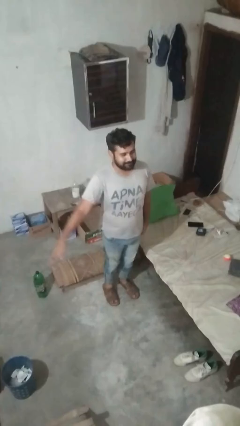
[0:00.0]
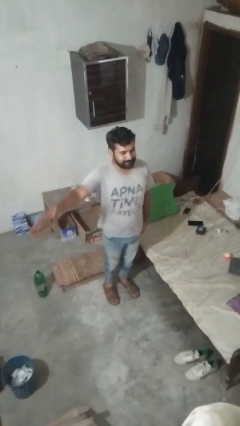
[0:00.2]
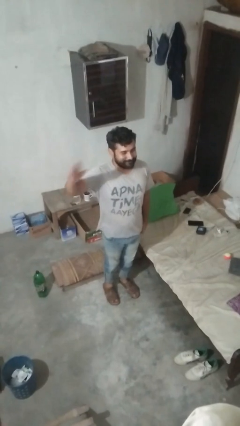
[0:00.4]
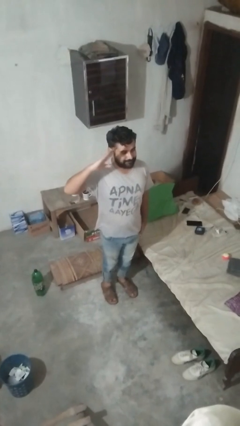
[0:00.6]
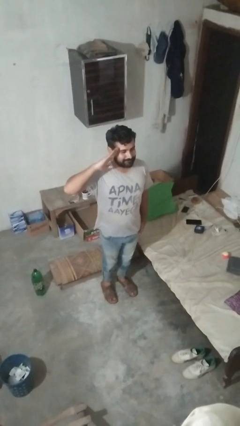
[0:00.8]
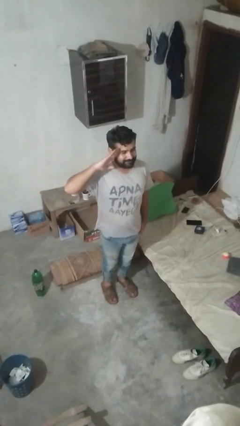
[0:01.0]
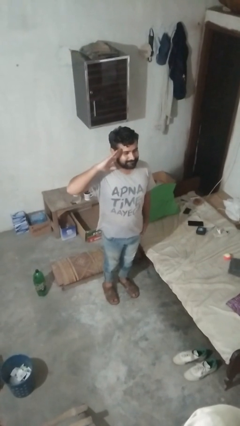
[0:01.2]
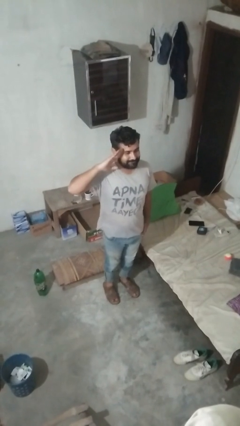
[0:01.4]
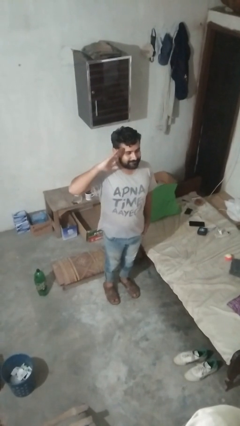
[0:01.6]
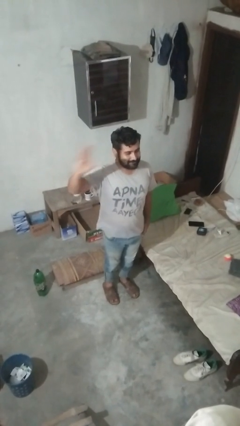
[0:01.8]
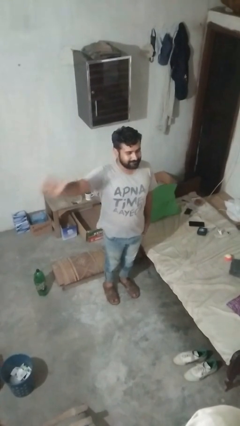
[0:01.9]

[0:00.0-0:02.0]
person salutes

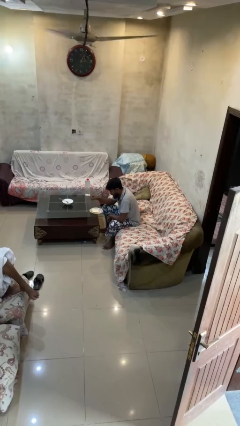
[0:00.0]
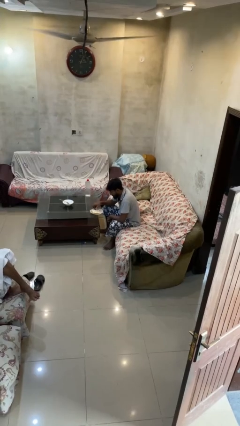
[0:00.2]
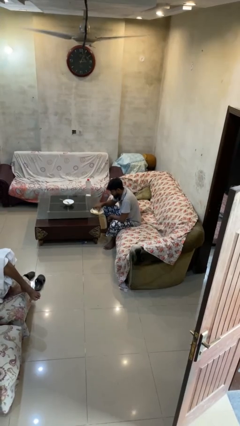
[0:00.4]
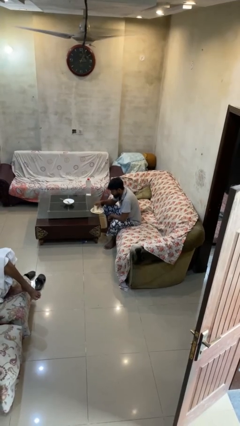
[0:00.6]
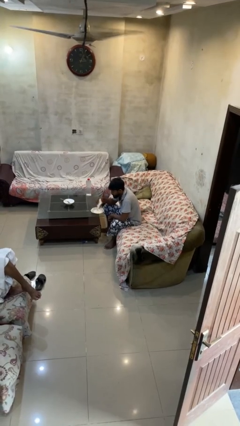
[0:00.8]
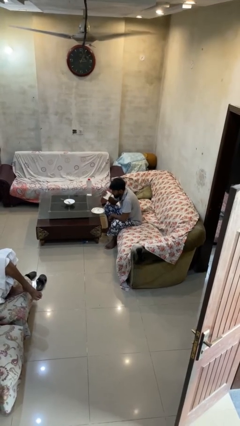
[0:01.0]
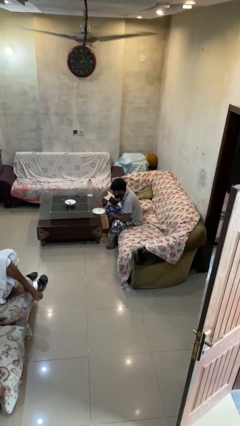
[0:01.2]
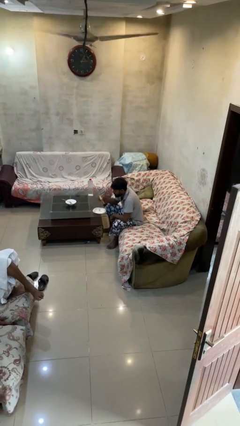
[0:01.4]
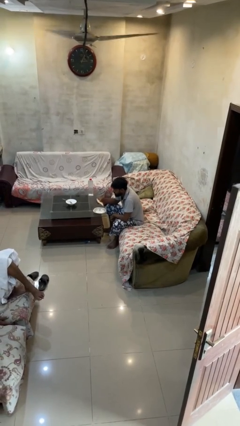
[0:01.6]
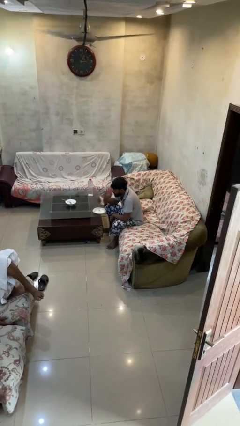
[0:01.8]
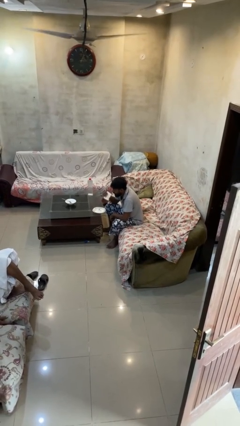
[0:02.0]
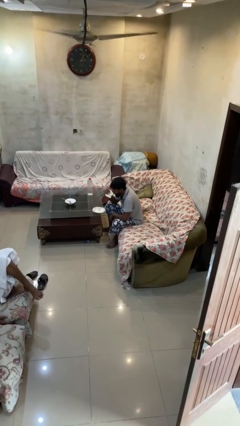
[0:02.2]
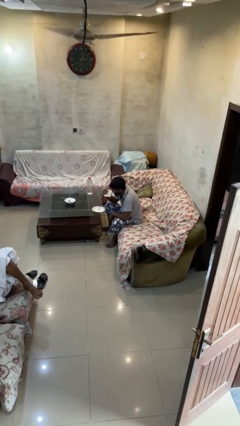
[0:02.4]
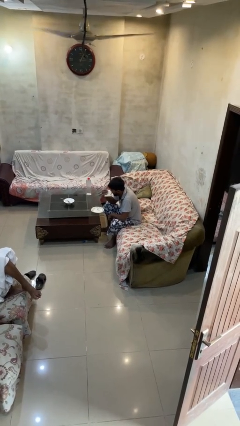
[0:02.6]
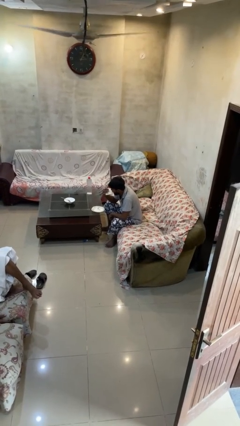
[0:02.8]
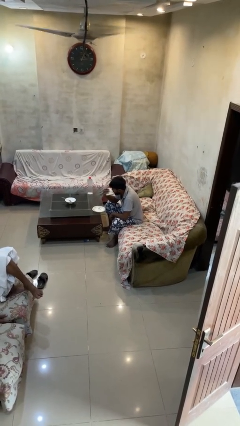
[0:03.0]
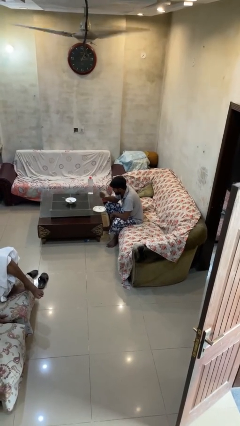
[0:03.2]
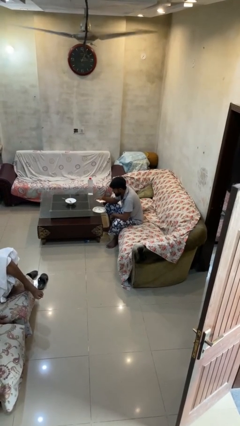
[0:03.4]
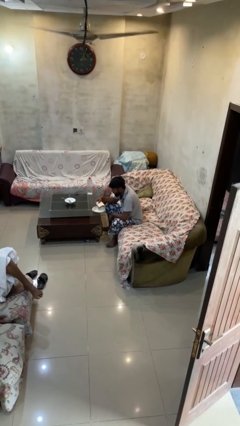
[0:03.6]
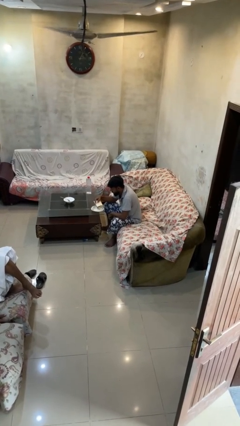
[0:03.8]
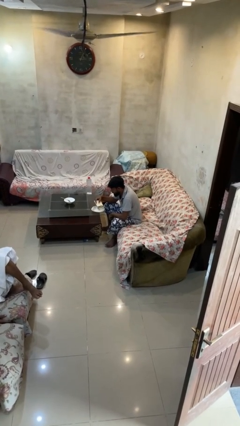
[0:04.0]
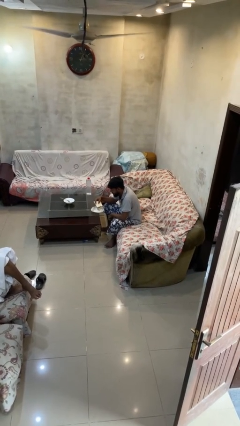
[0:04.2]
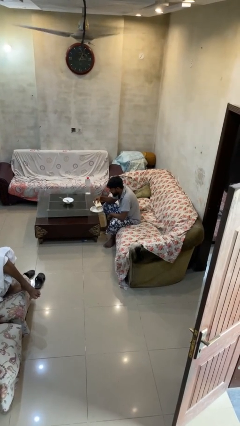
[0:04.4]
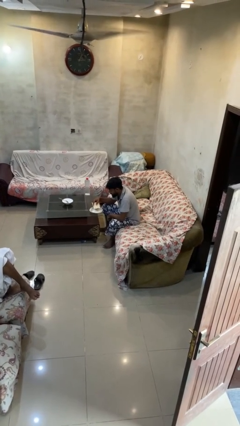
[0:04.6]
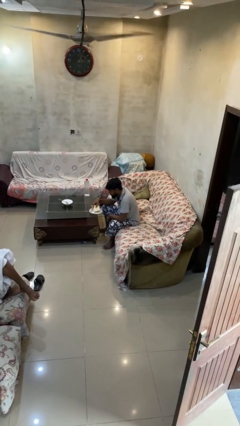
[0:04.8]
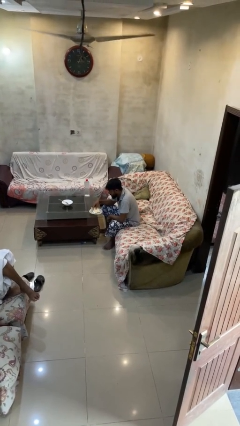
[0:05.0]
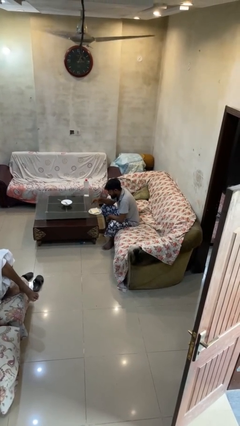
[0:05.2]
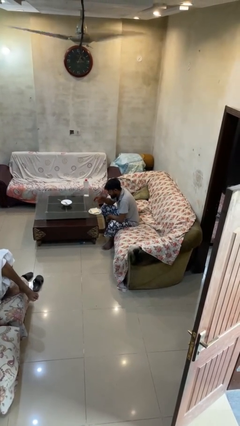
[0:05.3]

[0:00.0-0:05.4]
person eats with hands

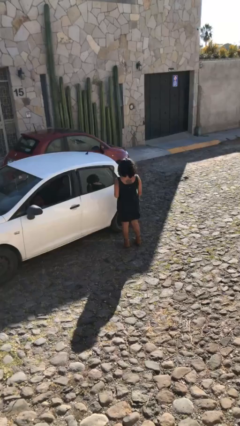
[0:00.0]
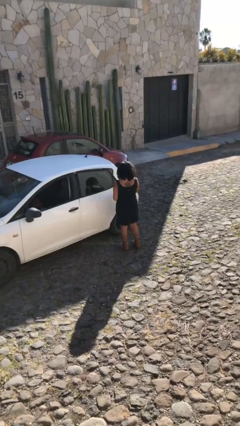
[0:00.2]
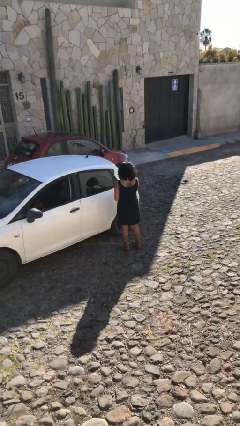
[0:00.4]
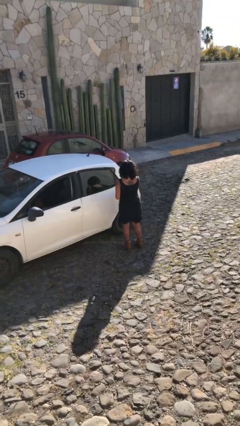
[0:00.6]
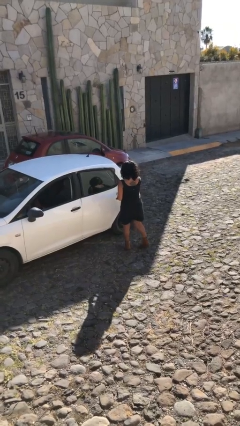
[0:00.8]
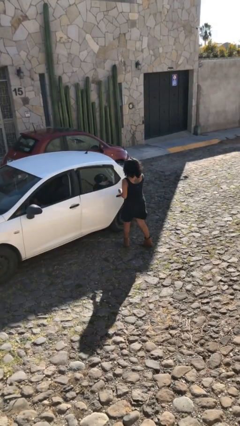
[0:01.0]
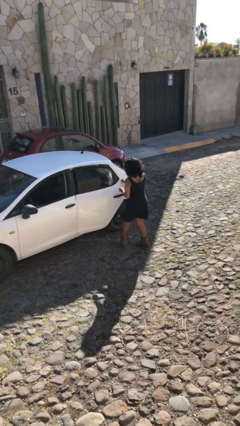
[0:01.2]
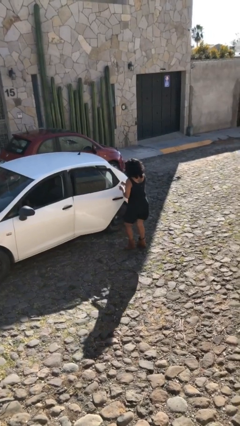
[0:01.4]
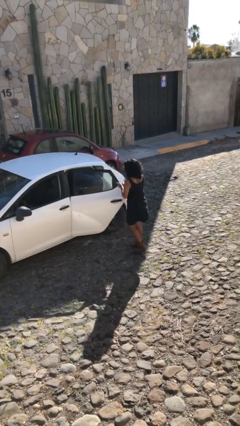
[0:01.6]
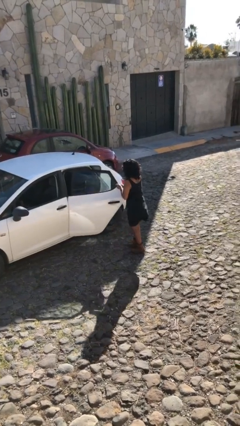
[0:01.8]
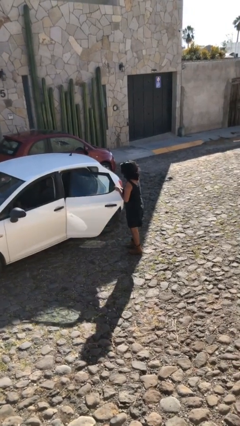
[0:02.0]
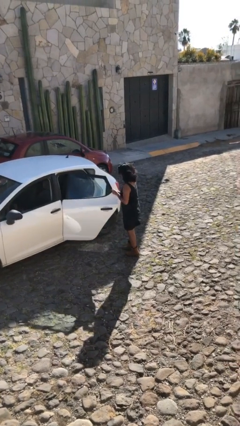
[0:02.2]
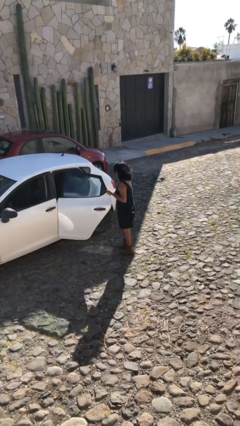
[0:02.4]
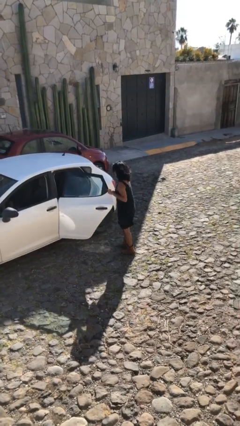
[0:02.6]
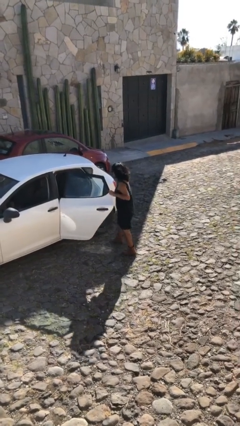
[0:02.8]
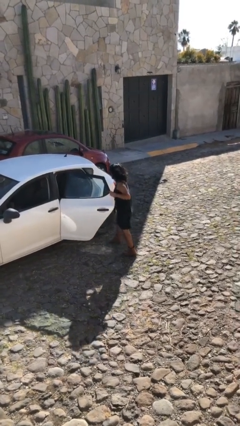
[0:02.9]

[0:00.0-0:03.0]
person opens car door

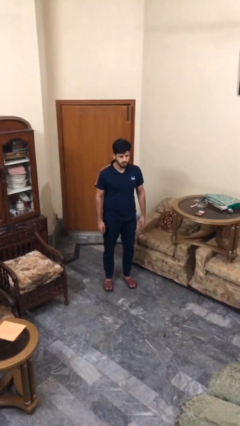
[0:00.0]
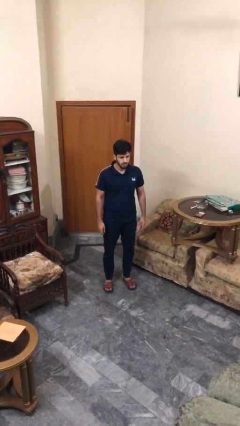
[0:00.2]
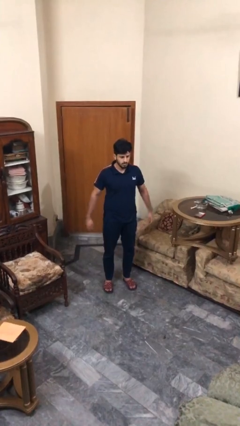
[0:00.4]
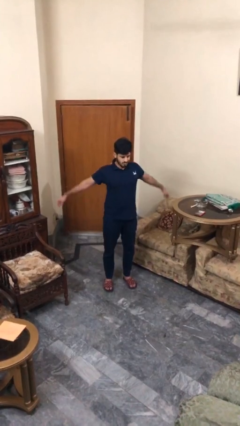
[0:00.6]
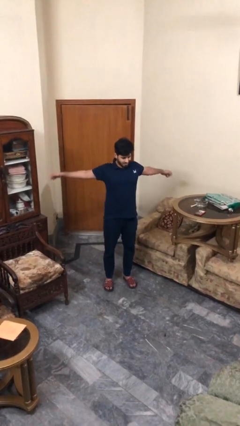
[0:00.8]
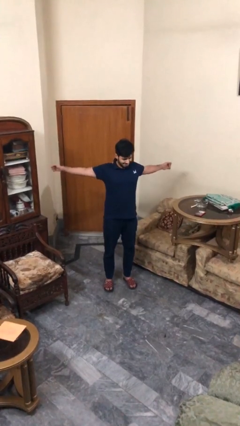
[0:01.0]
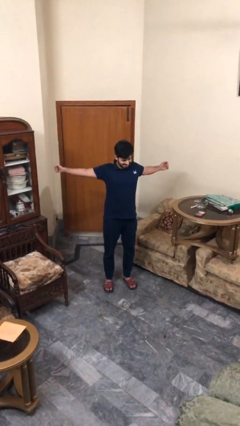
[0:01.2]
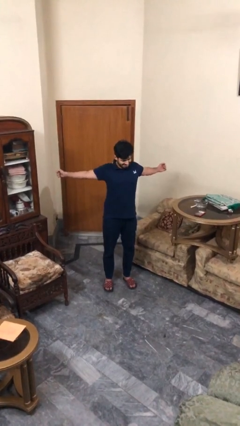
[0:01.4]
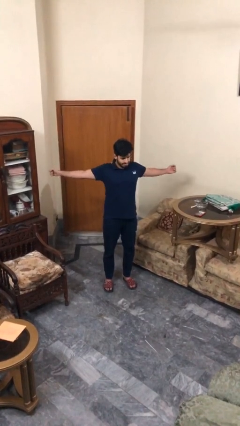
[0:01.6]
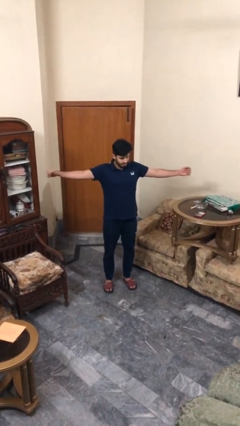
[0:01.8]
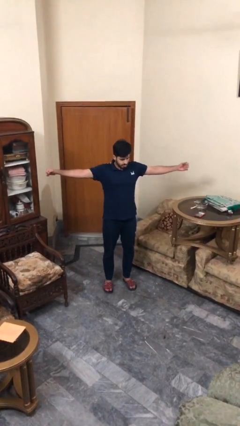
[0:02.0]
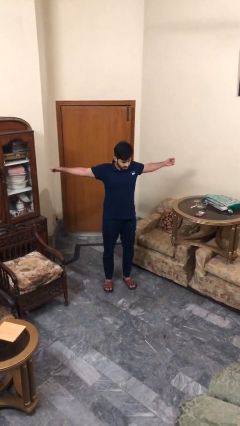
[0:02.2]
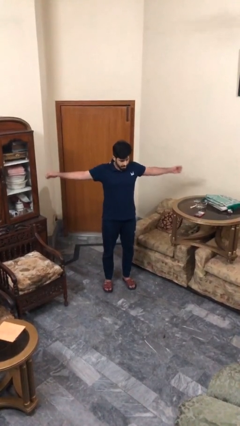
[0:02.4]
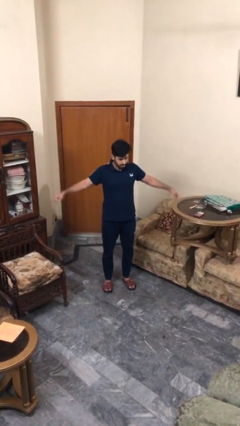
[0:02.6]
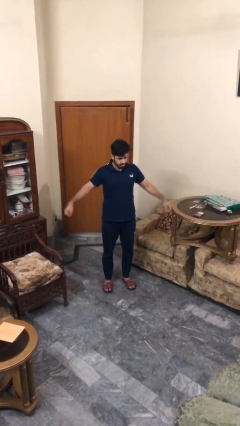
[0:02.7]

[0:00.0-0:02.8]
person stretches arms to side

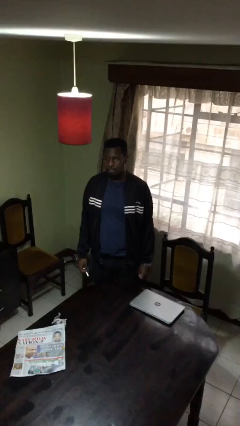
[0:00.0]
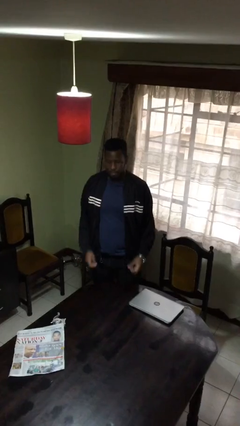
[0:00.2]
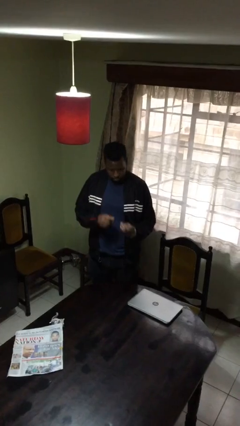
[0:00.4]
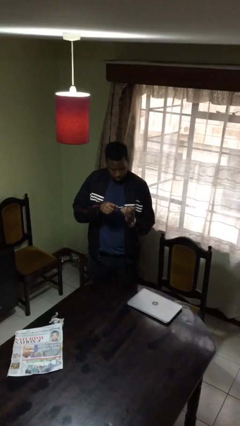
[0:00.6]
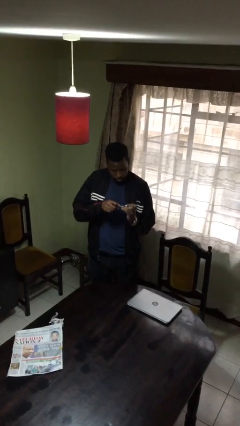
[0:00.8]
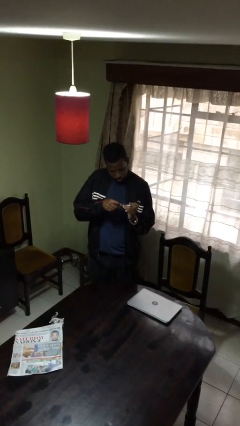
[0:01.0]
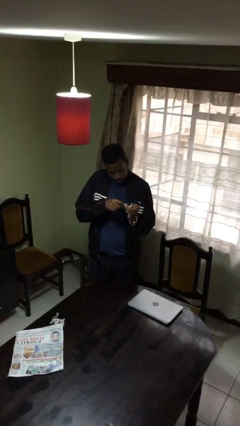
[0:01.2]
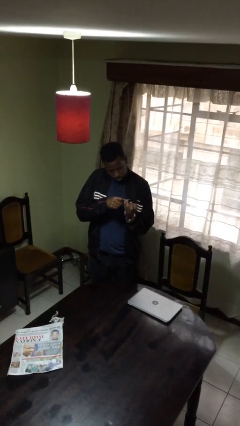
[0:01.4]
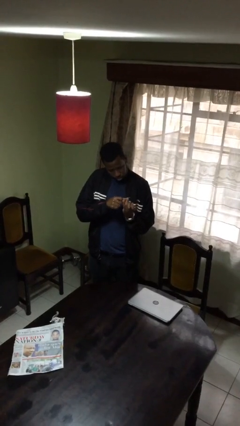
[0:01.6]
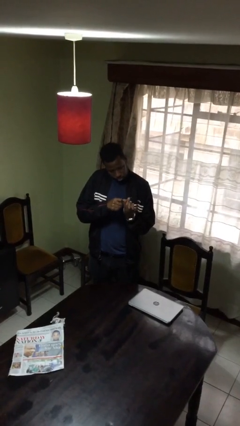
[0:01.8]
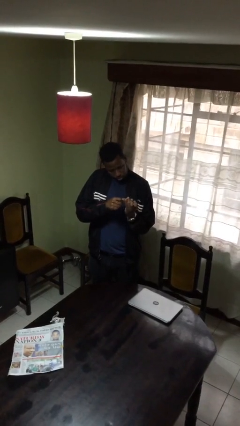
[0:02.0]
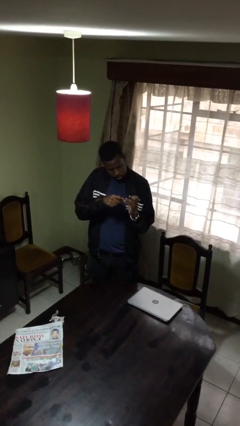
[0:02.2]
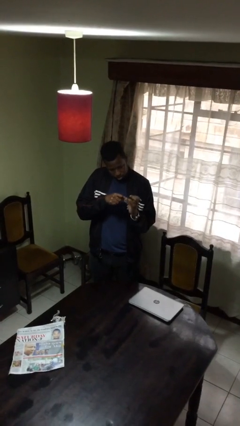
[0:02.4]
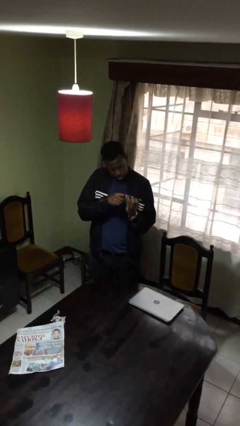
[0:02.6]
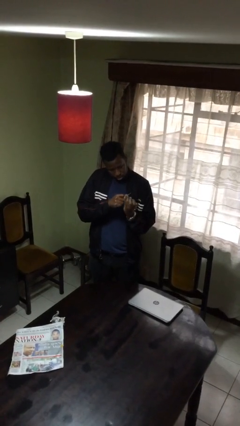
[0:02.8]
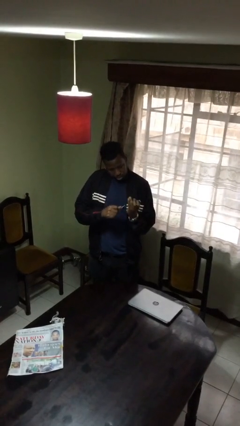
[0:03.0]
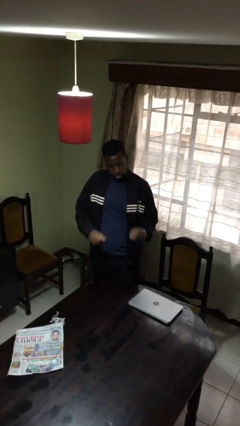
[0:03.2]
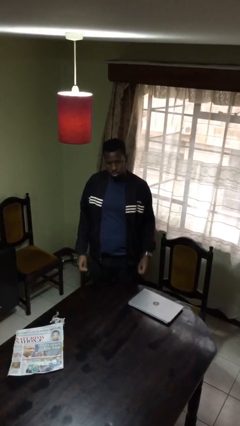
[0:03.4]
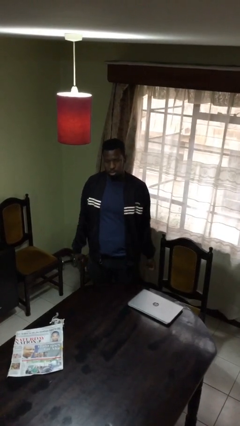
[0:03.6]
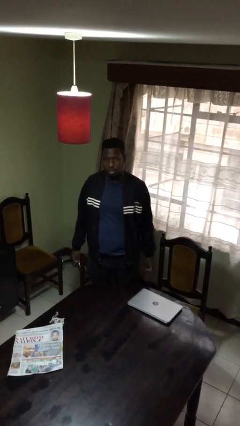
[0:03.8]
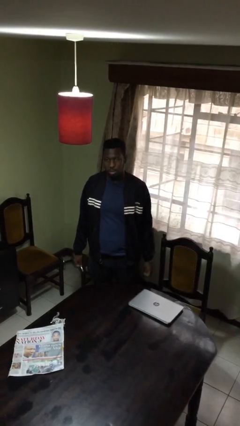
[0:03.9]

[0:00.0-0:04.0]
person files fingernails
